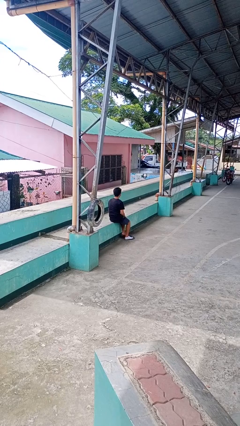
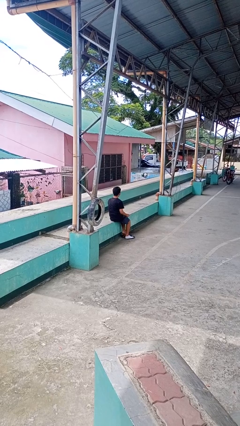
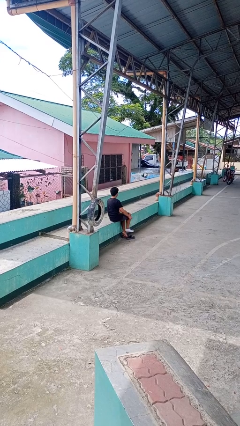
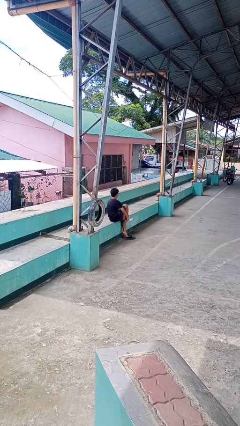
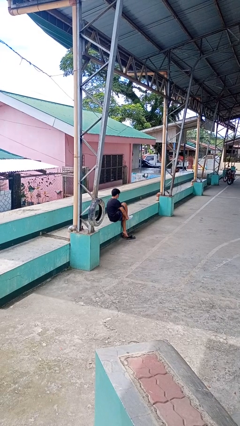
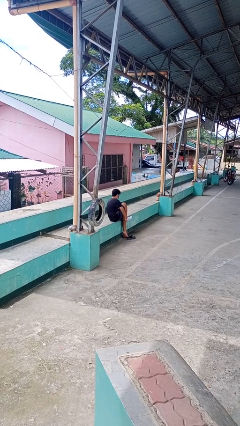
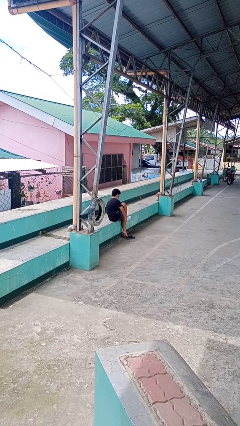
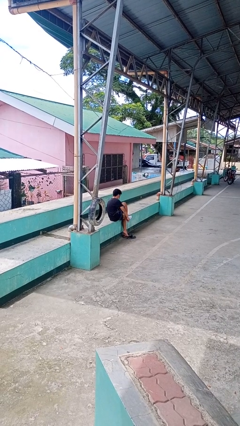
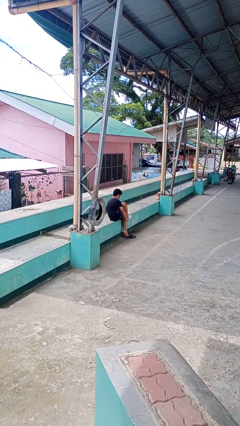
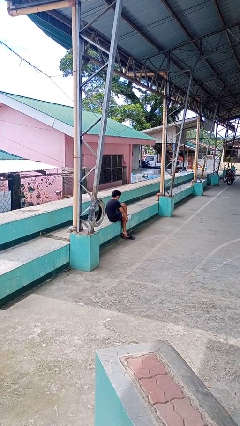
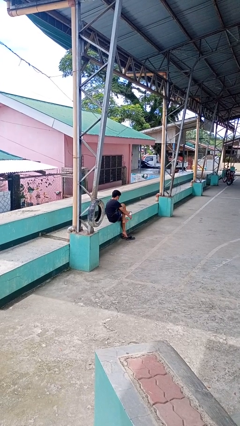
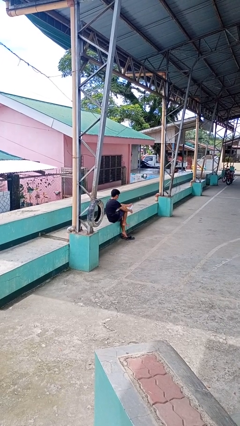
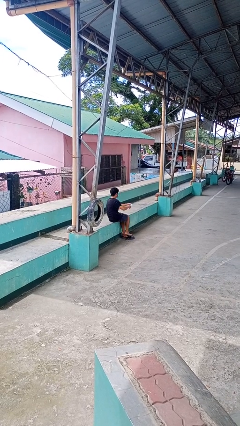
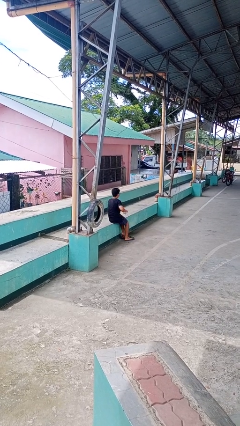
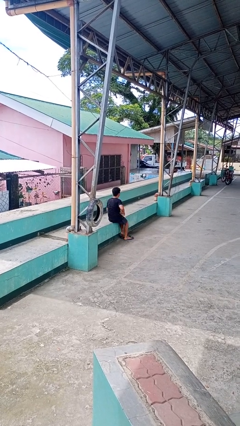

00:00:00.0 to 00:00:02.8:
person takes off socks

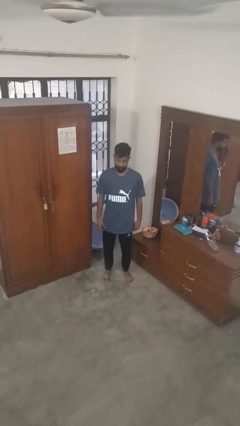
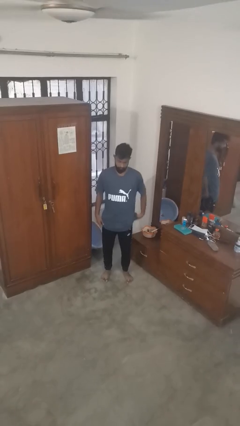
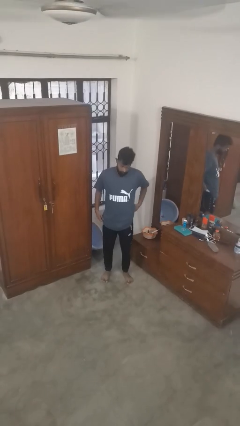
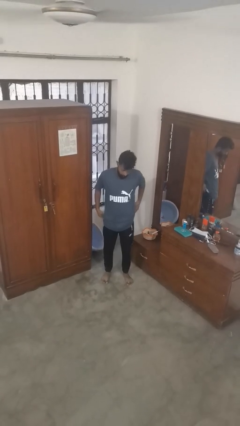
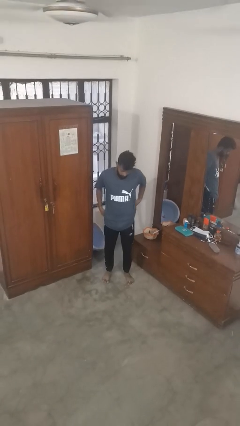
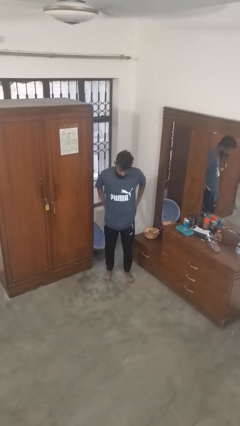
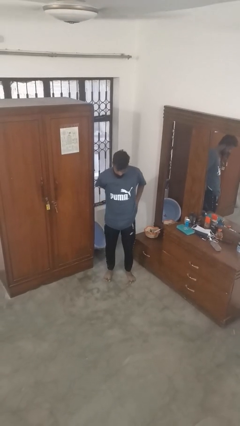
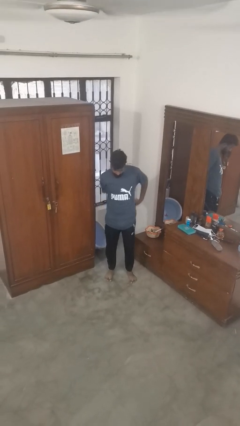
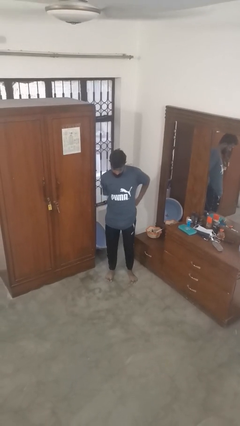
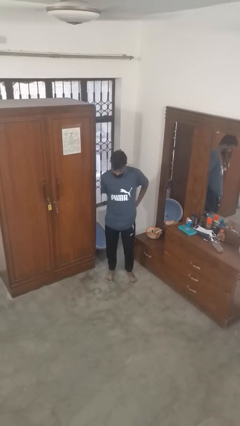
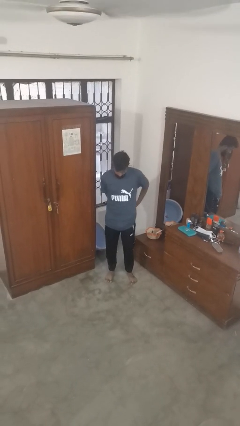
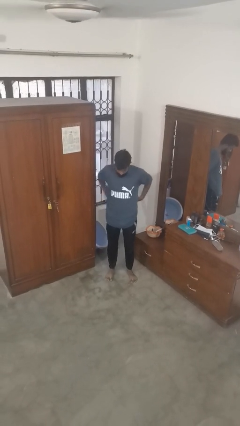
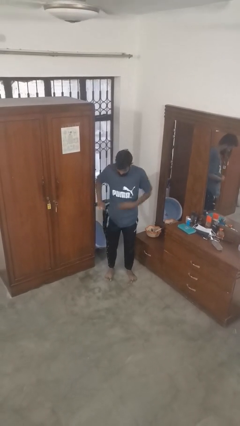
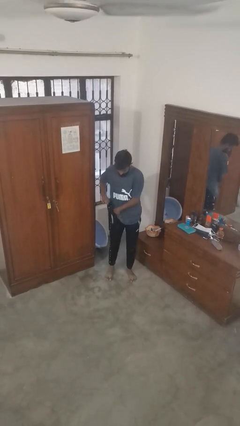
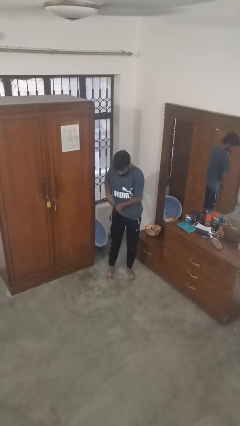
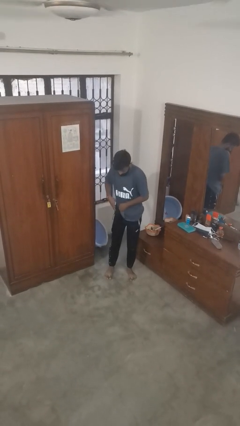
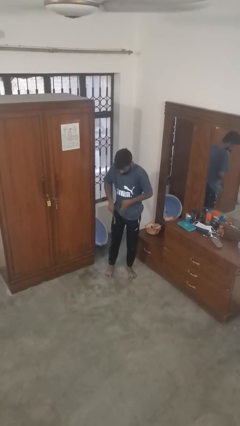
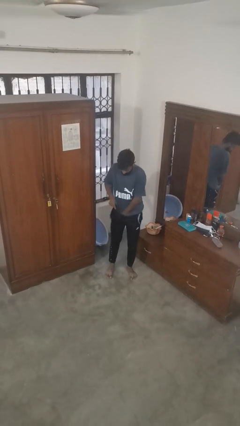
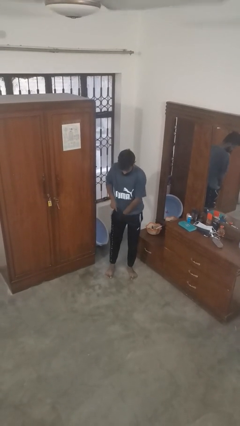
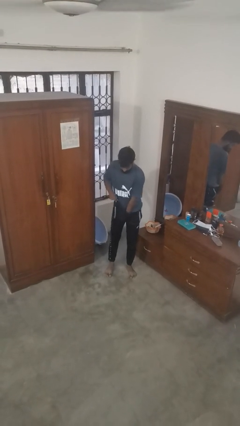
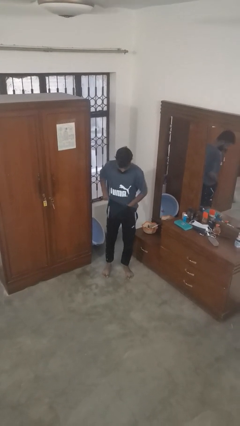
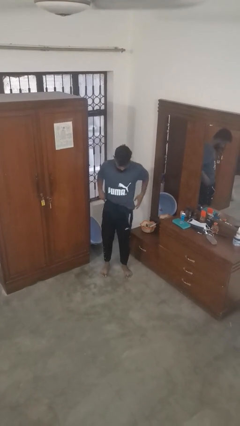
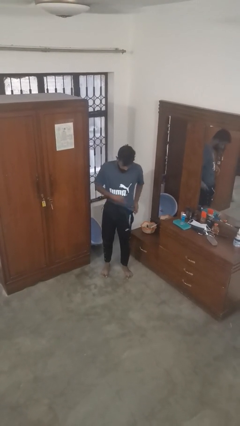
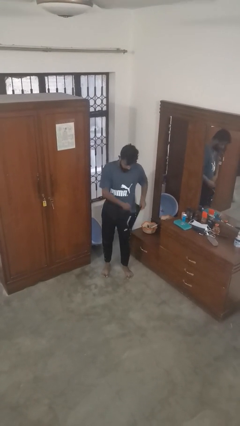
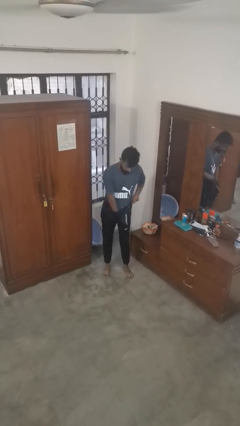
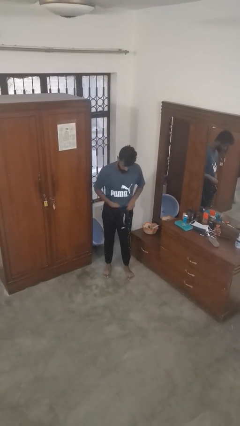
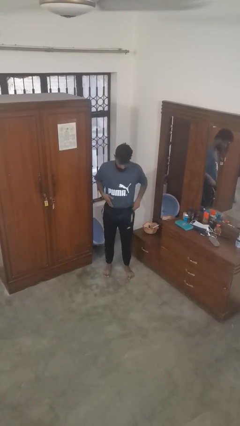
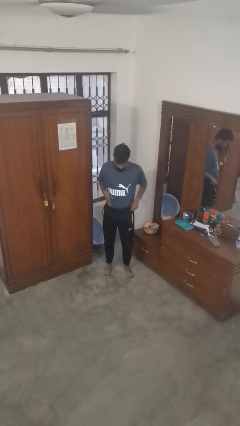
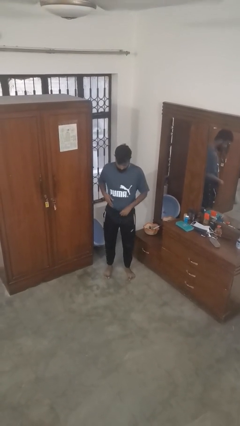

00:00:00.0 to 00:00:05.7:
person tucks in shirt

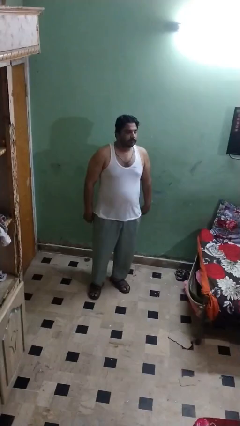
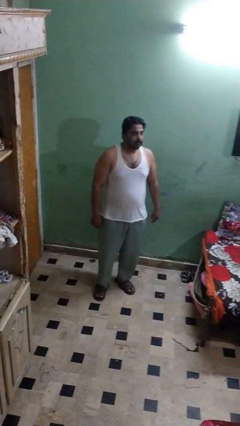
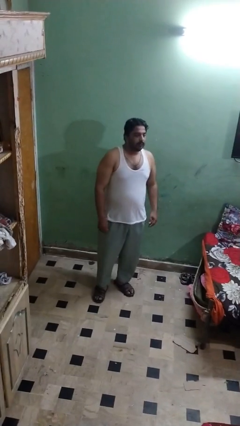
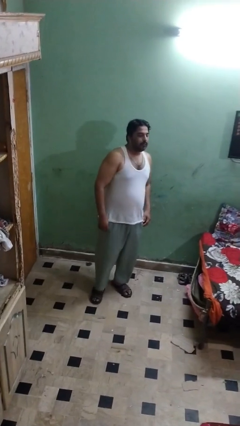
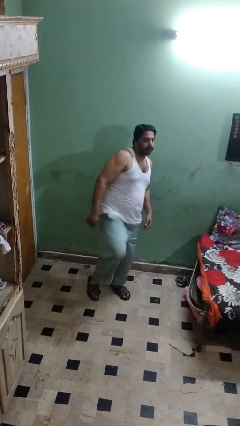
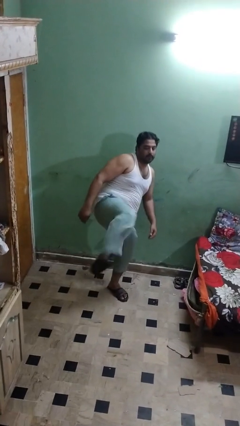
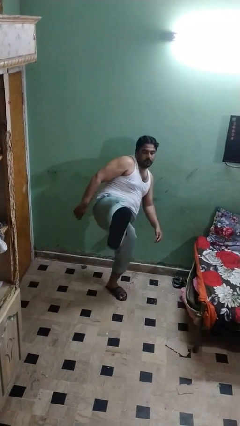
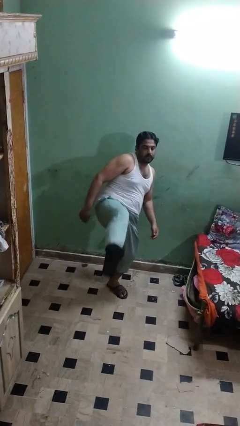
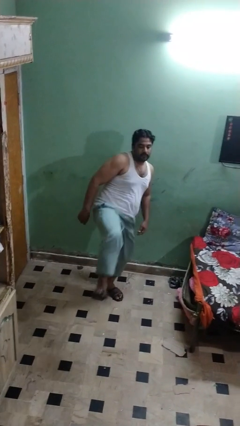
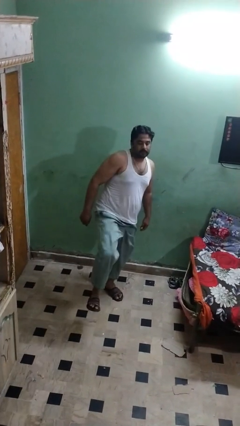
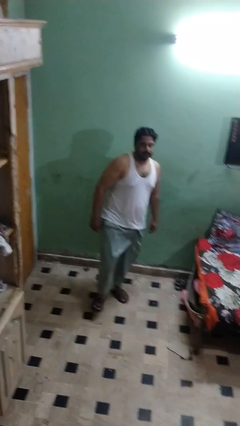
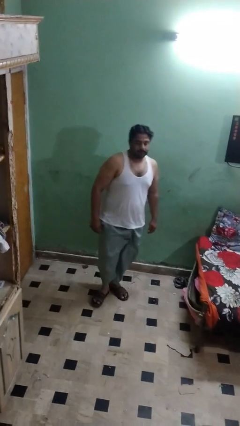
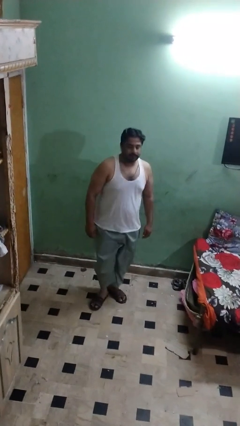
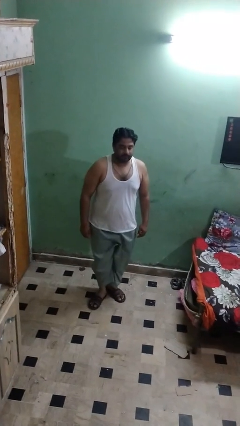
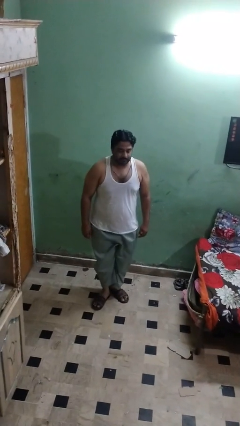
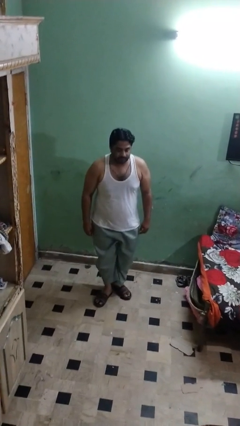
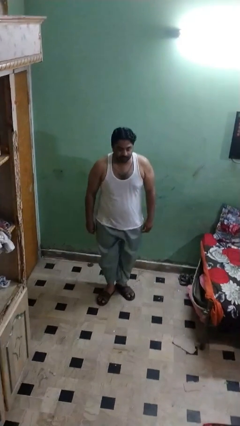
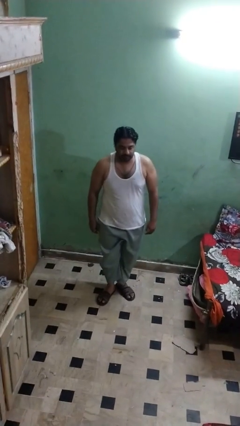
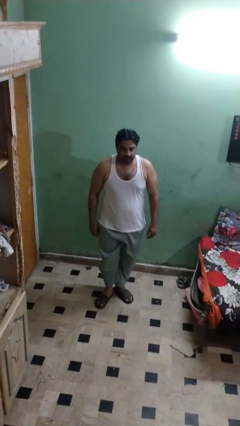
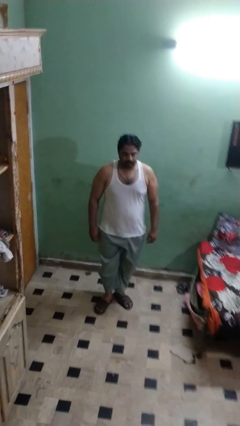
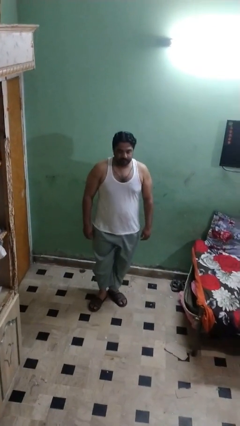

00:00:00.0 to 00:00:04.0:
person karate kicks

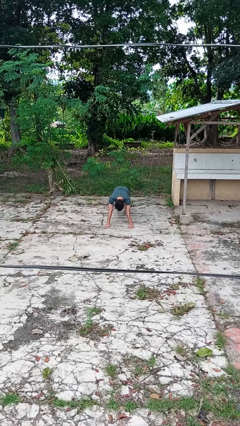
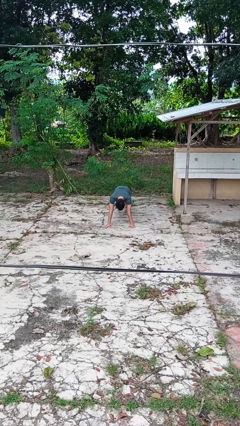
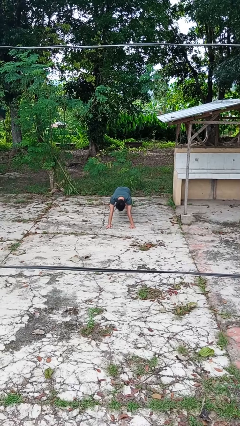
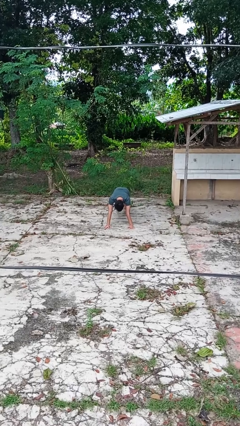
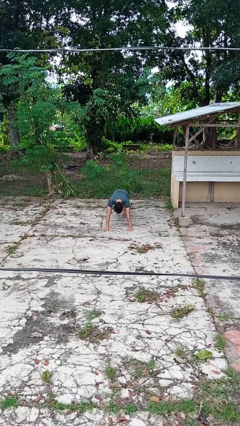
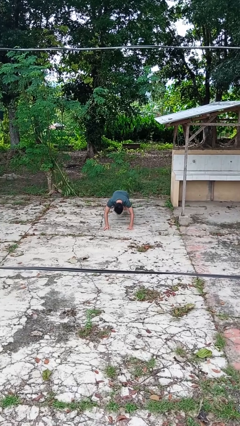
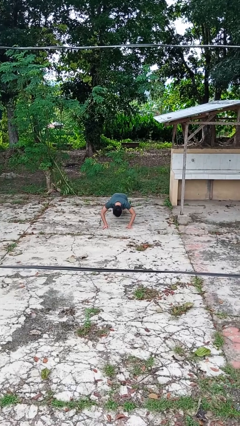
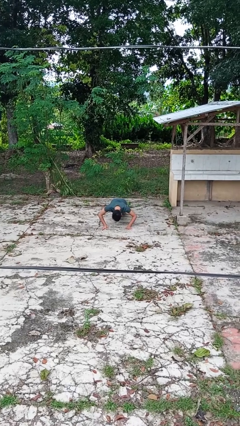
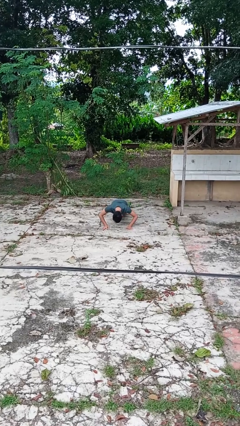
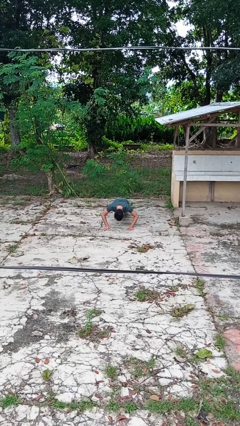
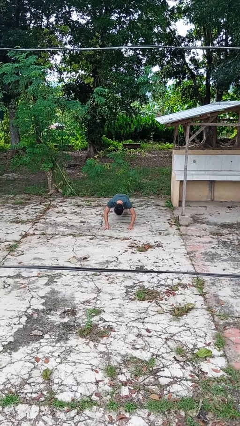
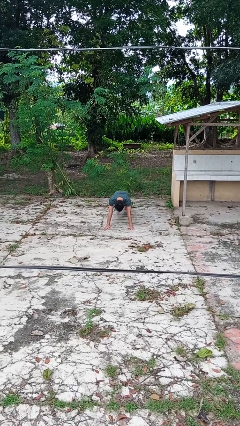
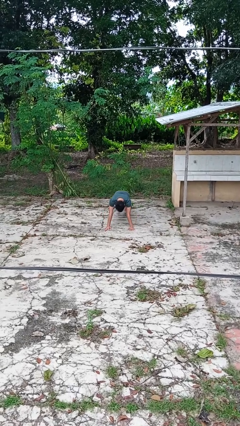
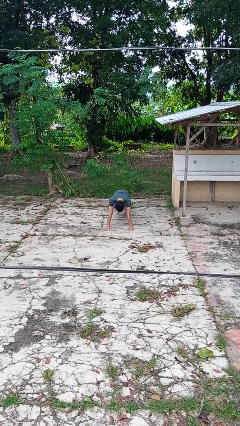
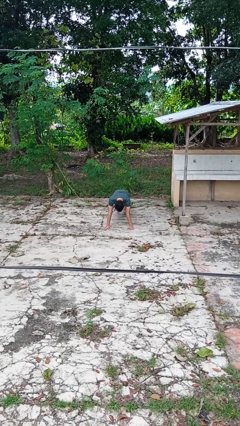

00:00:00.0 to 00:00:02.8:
person exercises with pushup

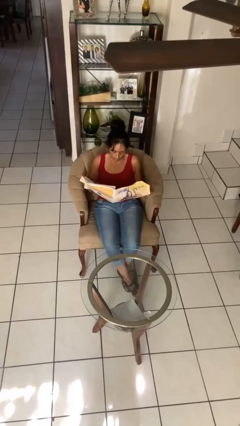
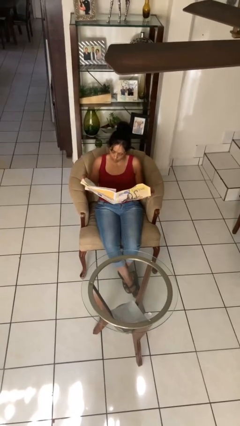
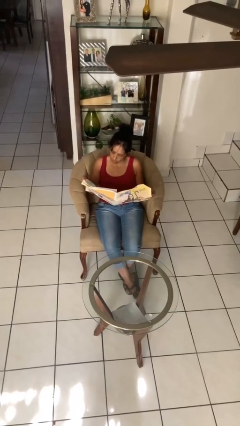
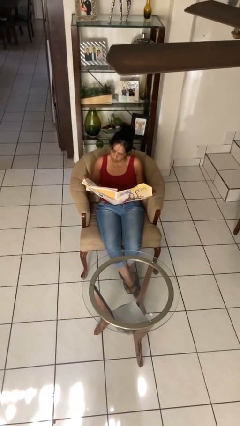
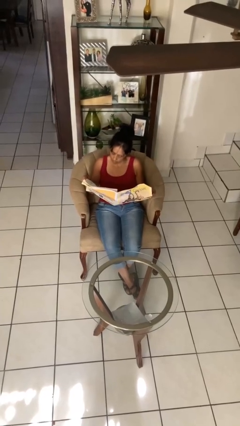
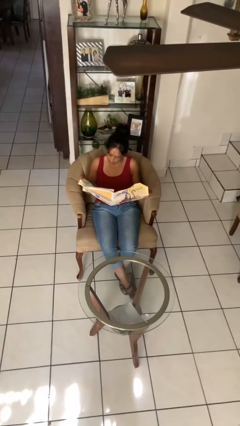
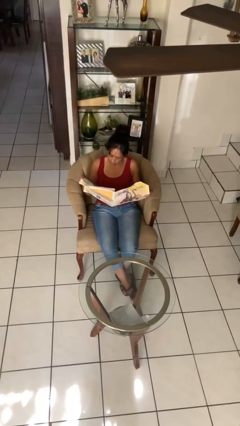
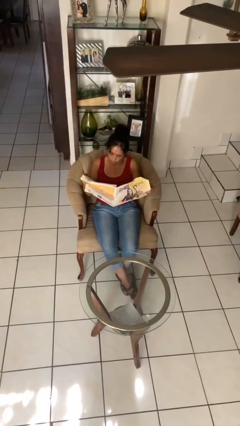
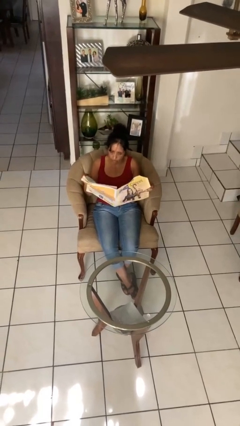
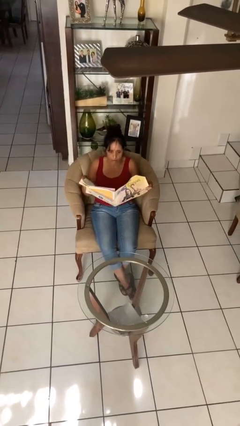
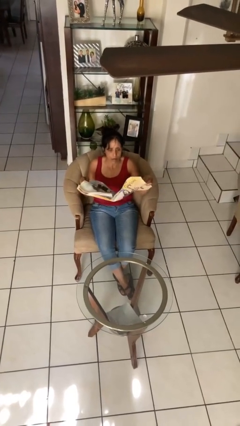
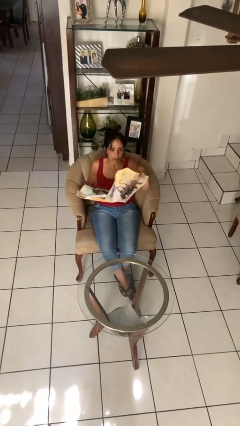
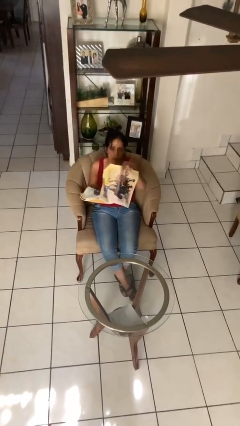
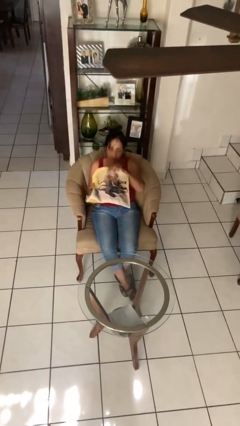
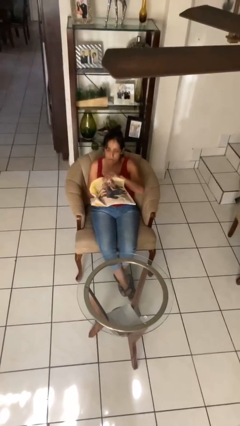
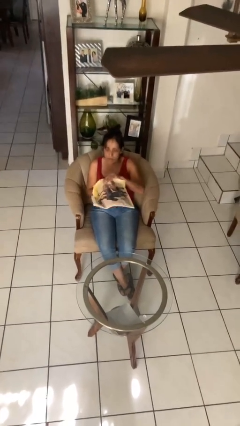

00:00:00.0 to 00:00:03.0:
person reads newspaper
